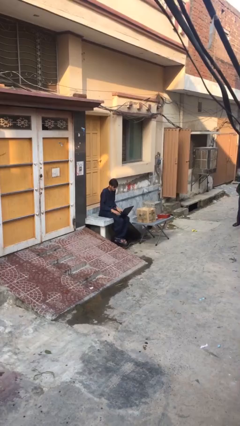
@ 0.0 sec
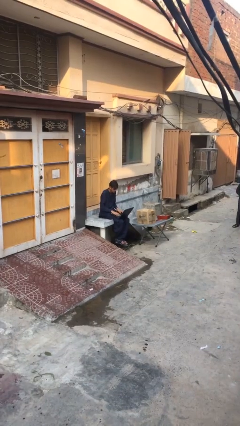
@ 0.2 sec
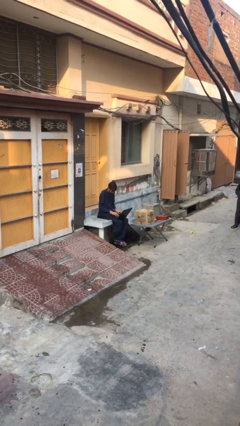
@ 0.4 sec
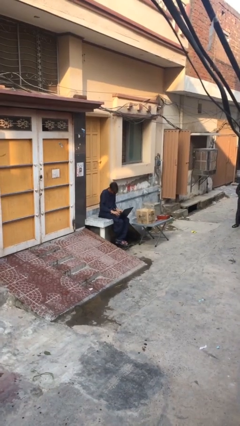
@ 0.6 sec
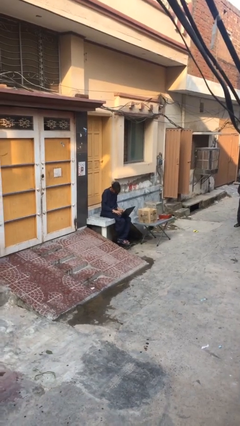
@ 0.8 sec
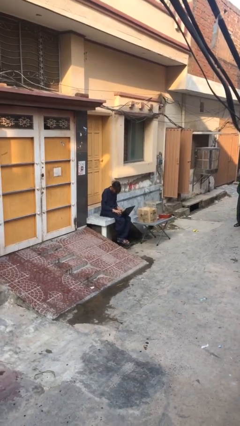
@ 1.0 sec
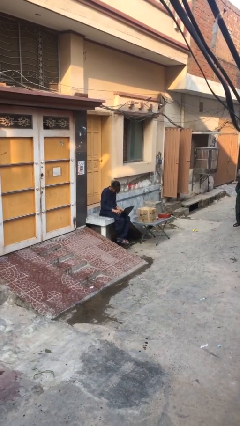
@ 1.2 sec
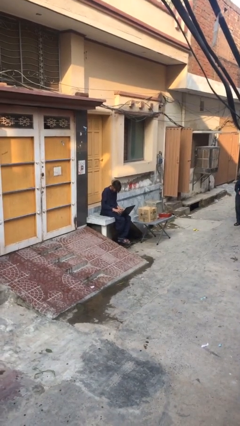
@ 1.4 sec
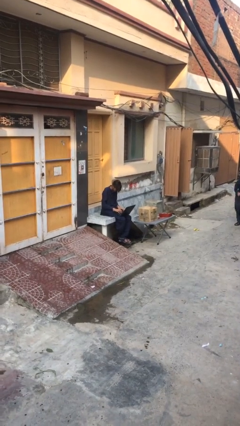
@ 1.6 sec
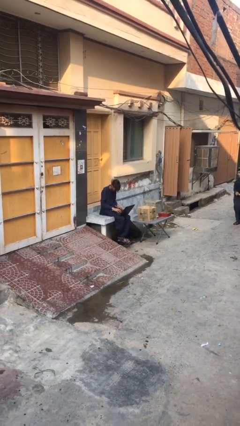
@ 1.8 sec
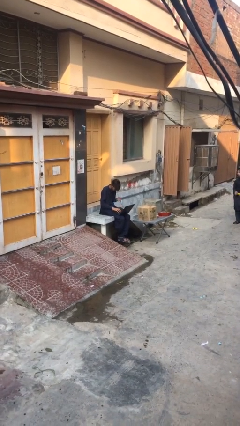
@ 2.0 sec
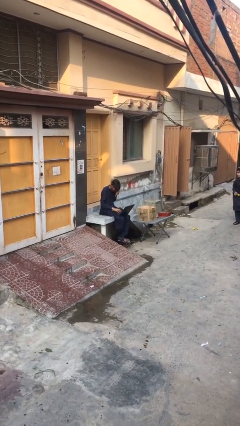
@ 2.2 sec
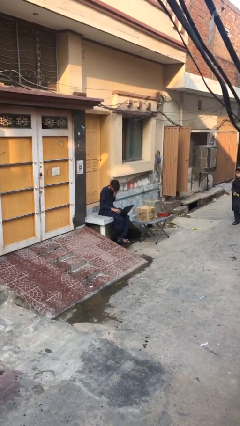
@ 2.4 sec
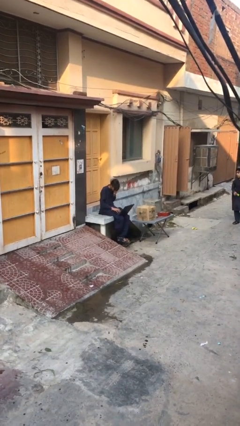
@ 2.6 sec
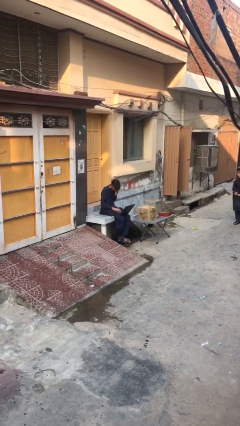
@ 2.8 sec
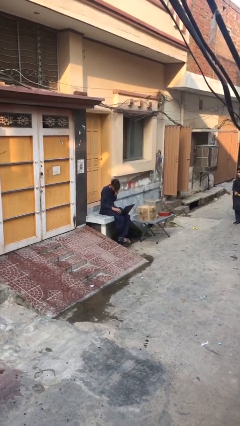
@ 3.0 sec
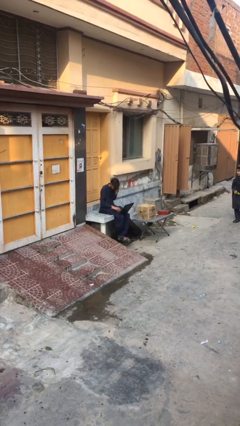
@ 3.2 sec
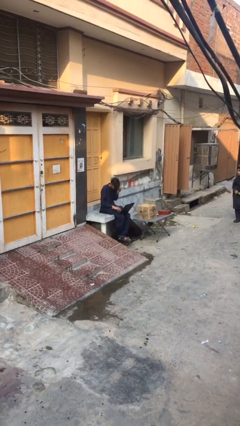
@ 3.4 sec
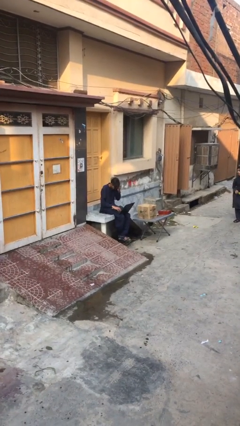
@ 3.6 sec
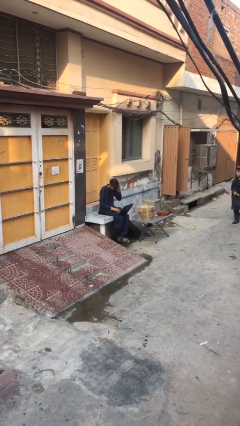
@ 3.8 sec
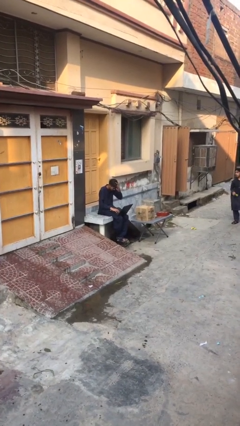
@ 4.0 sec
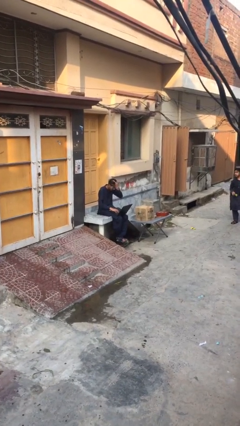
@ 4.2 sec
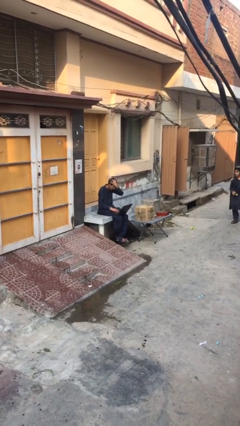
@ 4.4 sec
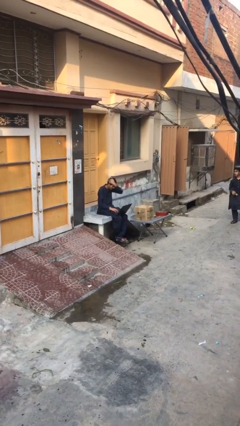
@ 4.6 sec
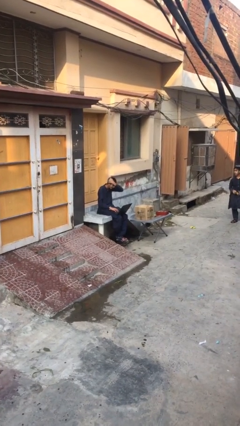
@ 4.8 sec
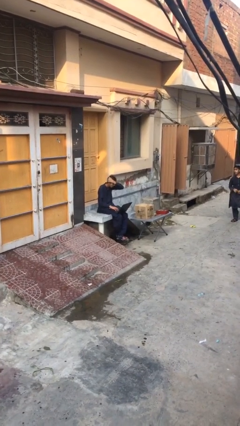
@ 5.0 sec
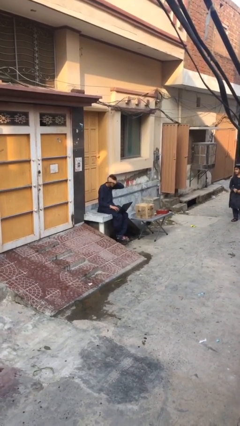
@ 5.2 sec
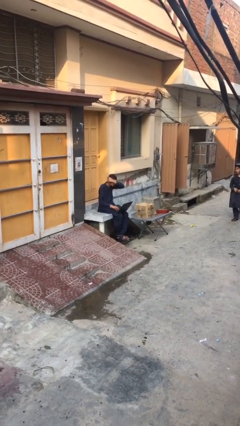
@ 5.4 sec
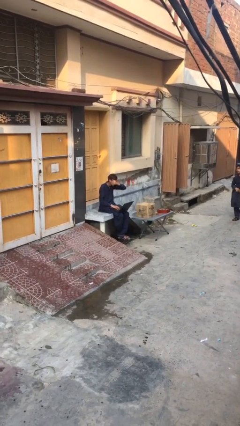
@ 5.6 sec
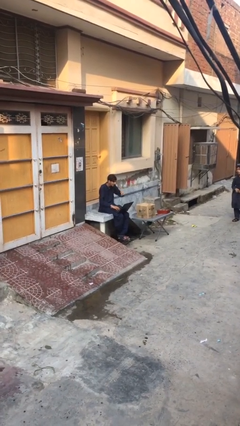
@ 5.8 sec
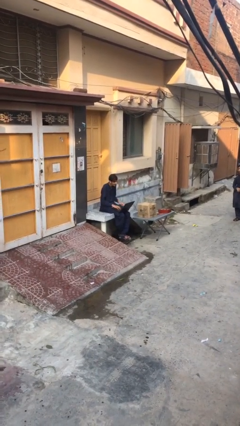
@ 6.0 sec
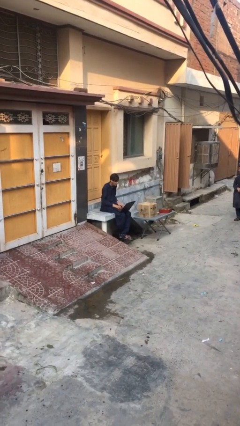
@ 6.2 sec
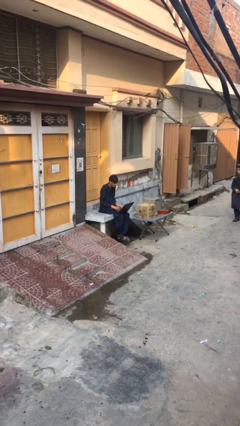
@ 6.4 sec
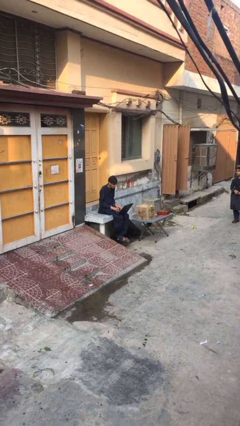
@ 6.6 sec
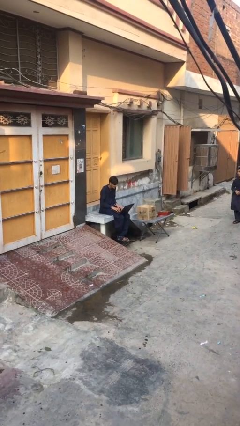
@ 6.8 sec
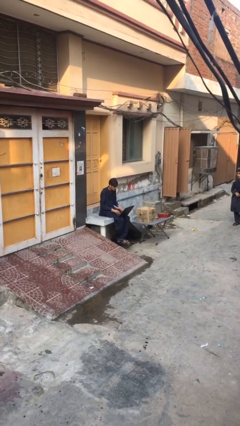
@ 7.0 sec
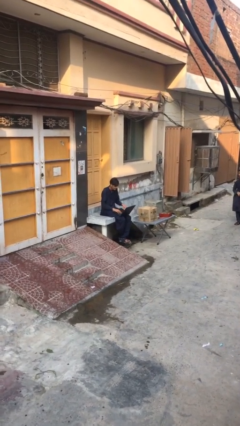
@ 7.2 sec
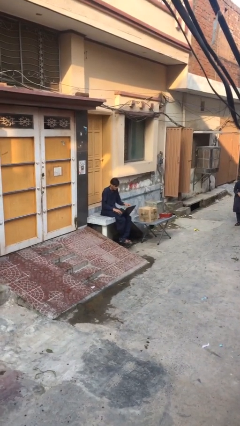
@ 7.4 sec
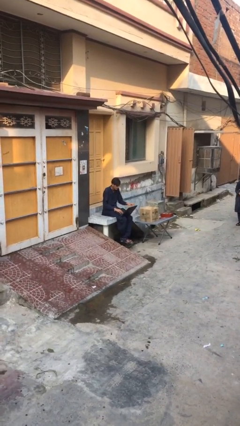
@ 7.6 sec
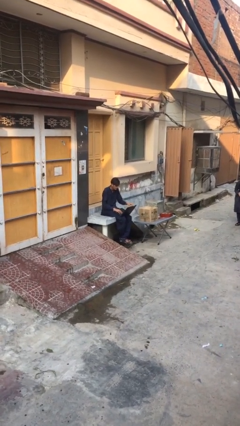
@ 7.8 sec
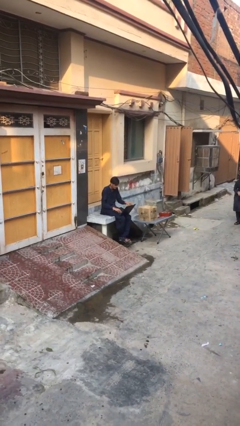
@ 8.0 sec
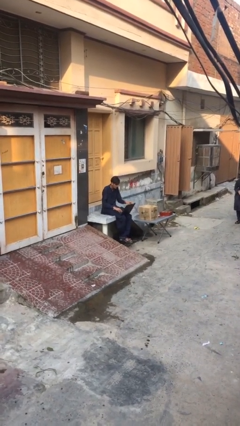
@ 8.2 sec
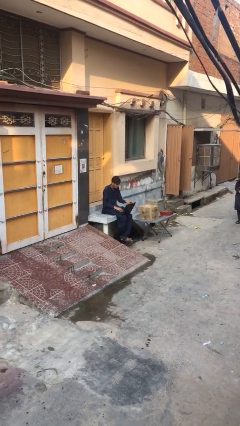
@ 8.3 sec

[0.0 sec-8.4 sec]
person interacts with laptop

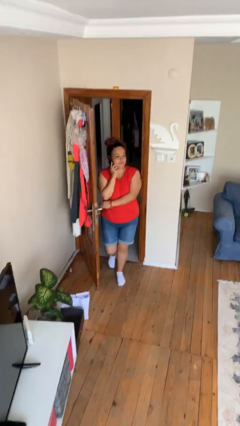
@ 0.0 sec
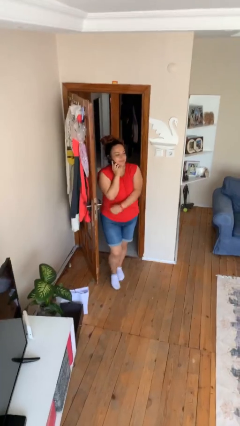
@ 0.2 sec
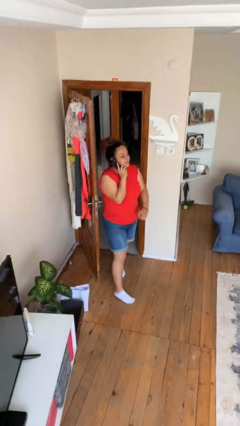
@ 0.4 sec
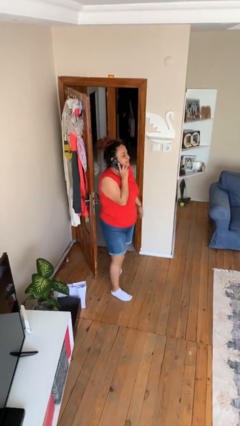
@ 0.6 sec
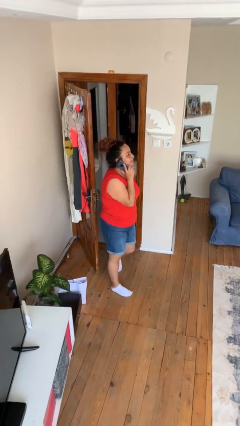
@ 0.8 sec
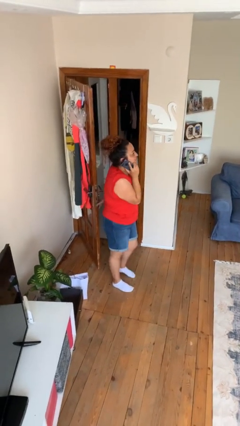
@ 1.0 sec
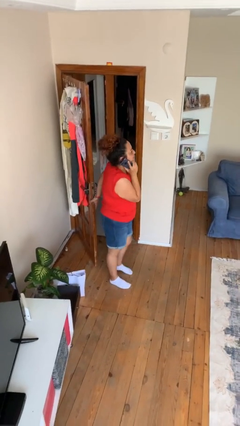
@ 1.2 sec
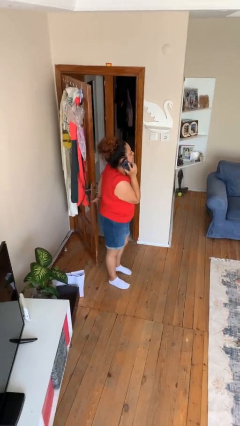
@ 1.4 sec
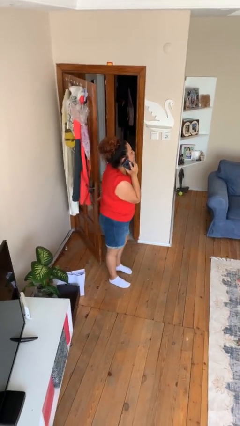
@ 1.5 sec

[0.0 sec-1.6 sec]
person enters scene through structure

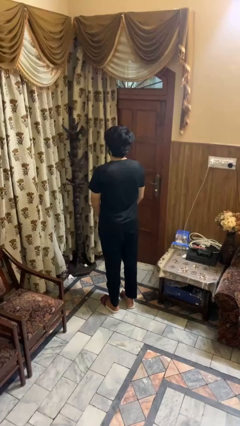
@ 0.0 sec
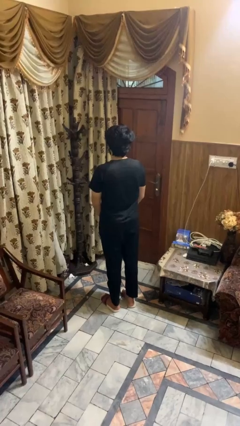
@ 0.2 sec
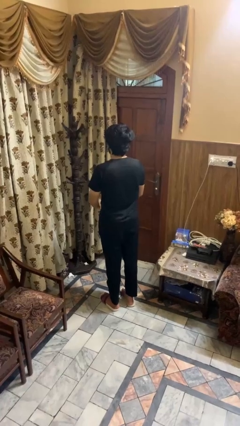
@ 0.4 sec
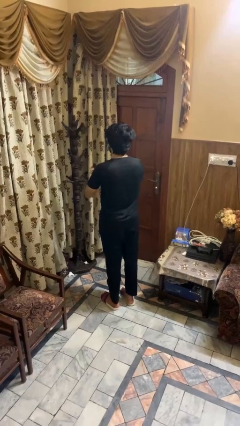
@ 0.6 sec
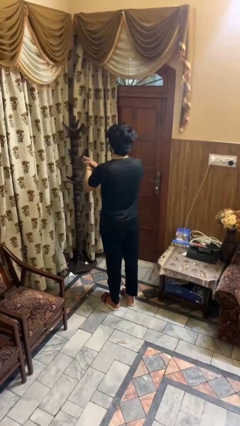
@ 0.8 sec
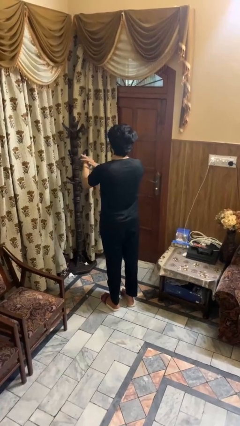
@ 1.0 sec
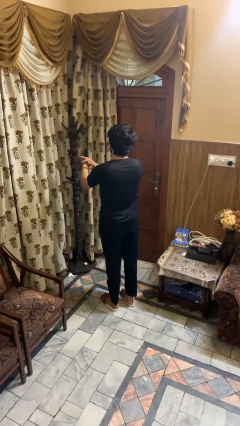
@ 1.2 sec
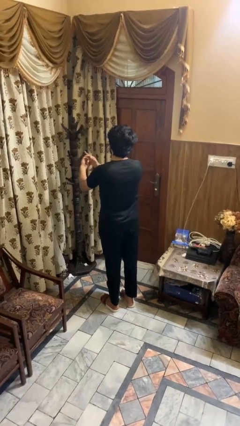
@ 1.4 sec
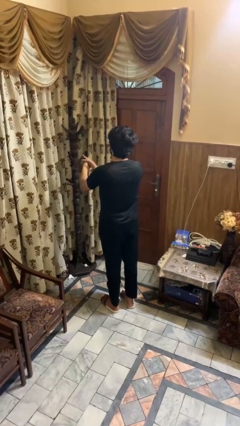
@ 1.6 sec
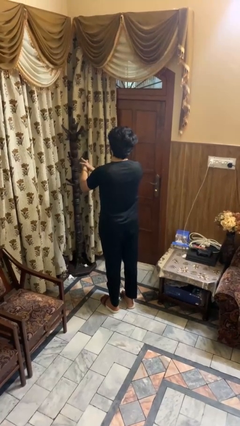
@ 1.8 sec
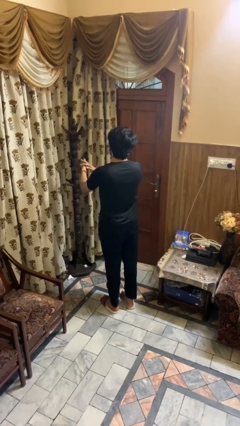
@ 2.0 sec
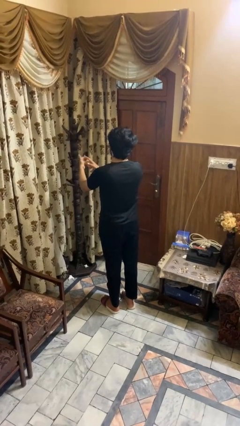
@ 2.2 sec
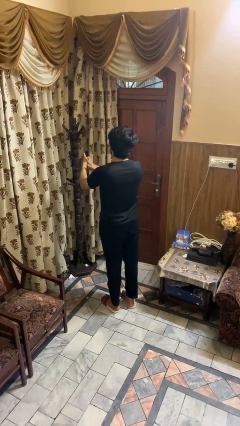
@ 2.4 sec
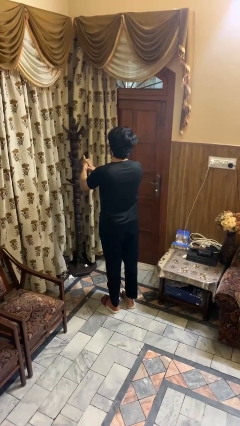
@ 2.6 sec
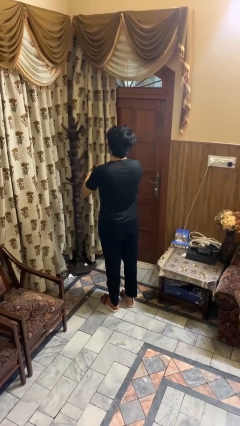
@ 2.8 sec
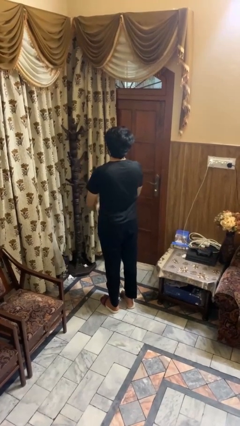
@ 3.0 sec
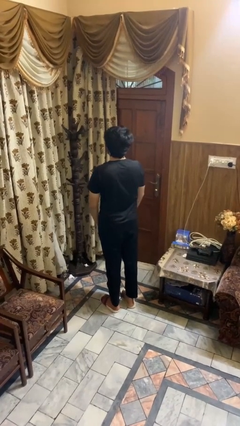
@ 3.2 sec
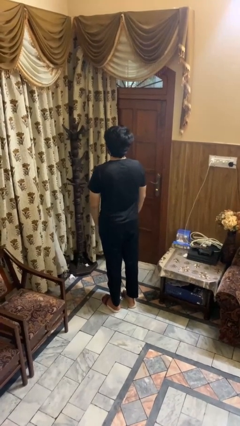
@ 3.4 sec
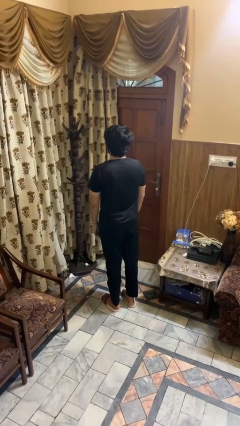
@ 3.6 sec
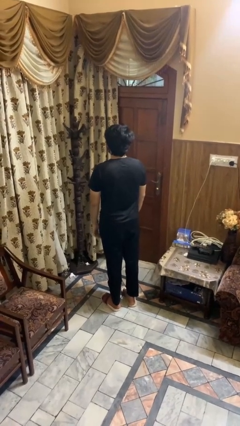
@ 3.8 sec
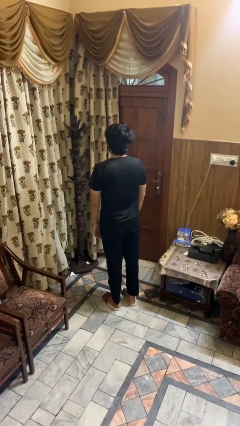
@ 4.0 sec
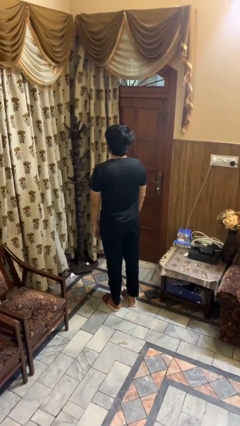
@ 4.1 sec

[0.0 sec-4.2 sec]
person cracks knuckles

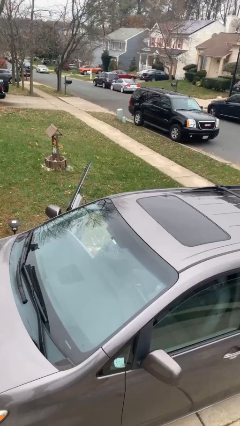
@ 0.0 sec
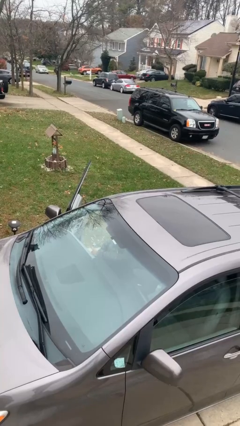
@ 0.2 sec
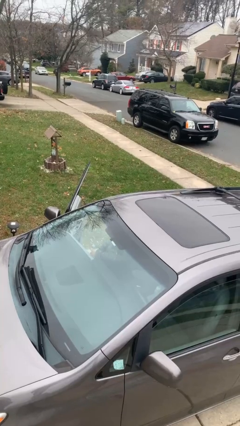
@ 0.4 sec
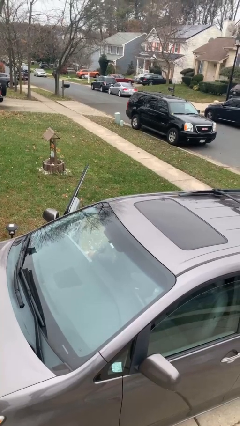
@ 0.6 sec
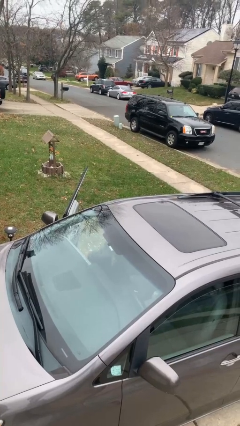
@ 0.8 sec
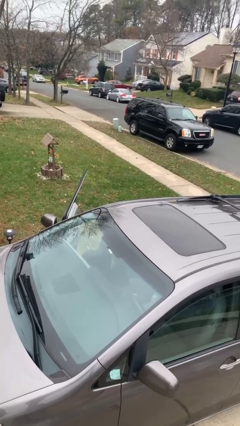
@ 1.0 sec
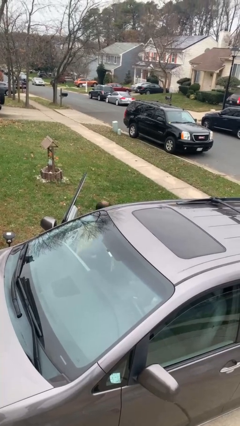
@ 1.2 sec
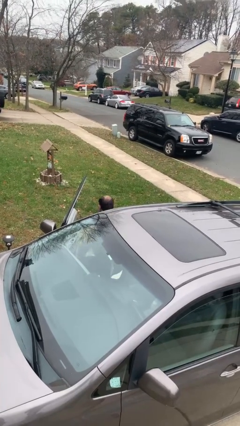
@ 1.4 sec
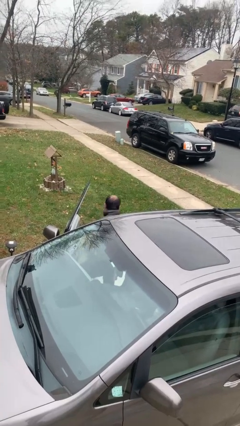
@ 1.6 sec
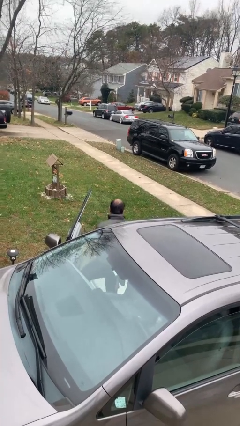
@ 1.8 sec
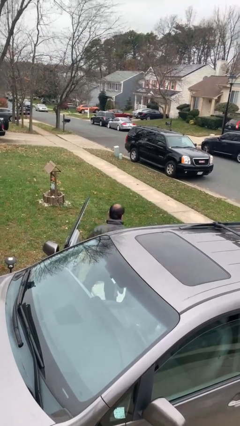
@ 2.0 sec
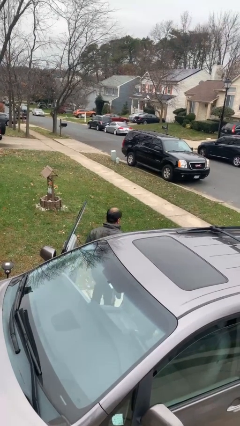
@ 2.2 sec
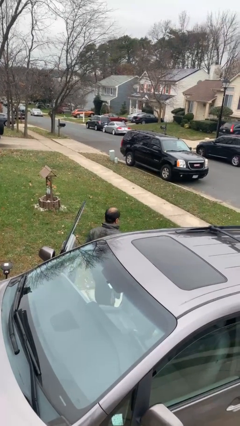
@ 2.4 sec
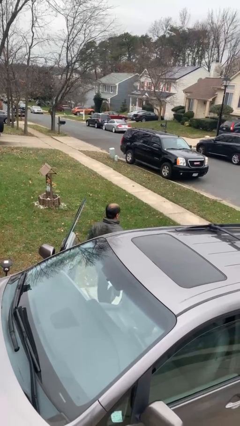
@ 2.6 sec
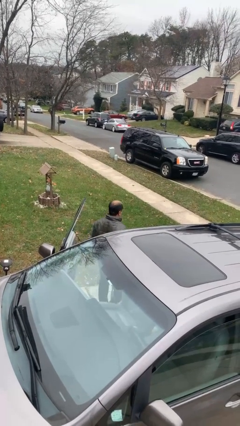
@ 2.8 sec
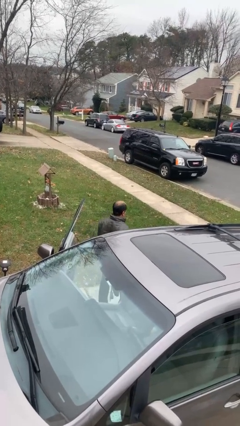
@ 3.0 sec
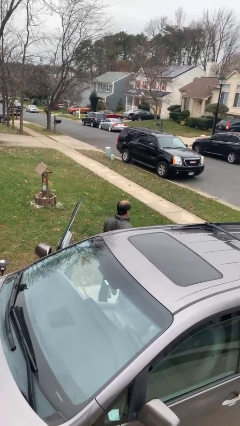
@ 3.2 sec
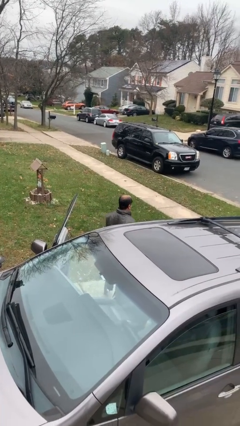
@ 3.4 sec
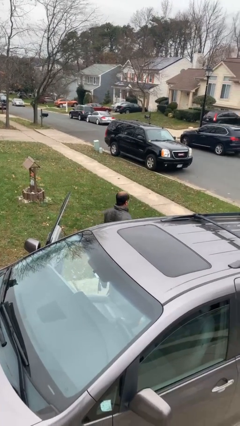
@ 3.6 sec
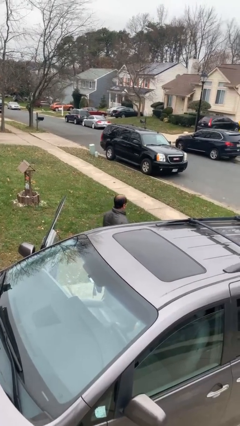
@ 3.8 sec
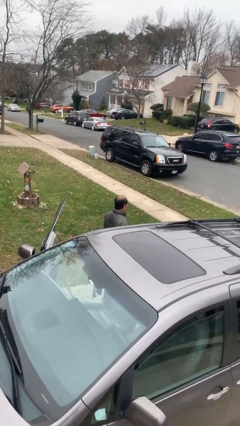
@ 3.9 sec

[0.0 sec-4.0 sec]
person exits car
